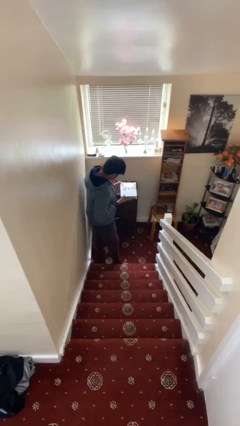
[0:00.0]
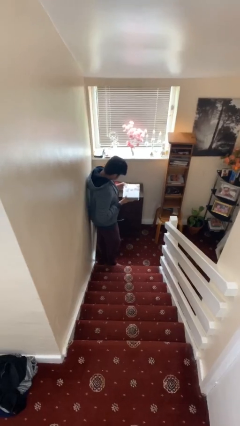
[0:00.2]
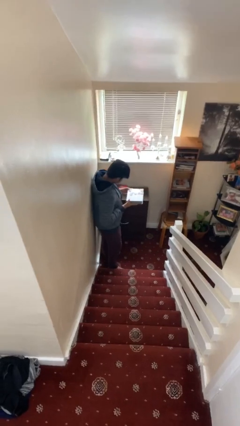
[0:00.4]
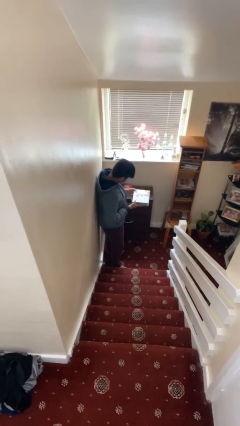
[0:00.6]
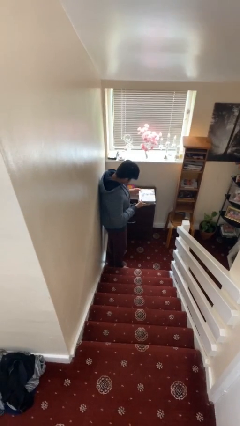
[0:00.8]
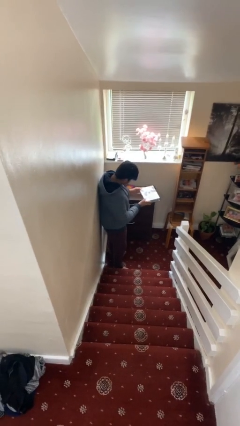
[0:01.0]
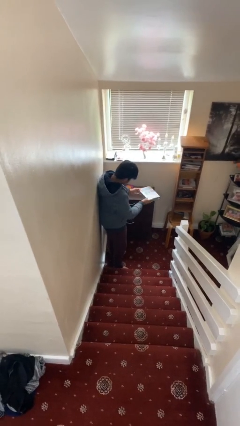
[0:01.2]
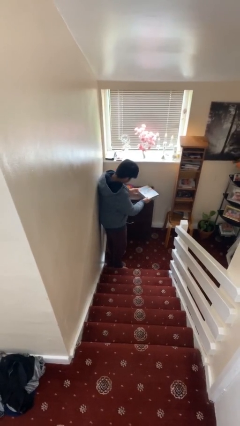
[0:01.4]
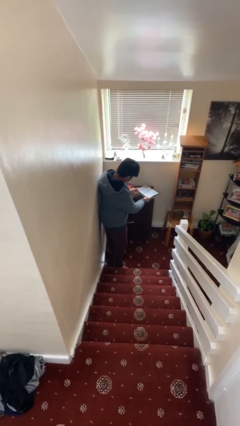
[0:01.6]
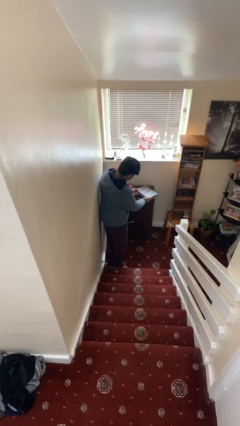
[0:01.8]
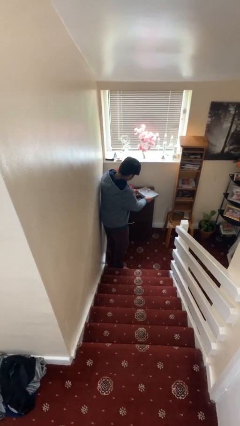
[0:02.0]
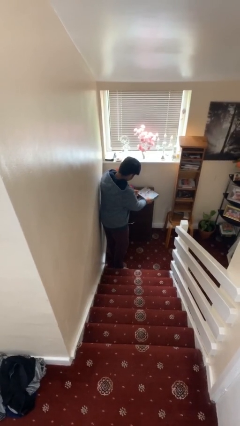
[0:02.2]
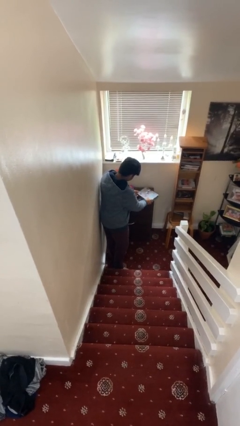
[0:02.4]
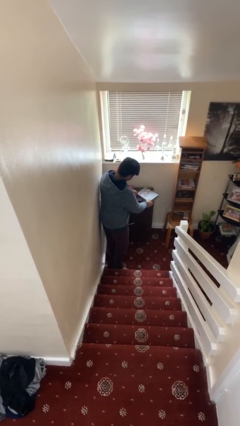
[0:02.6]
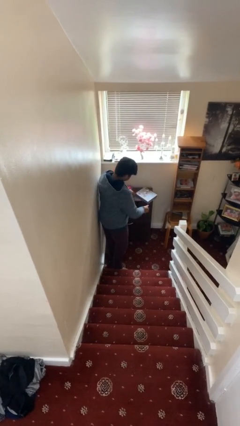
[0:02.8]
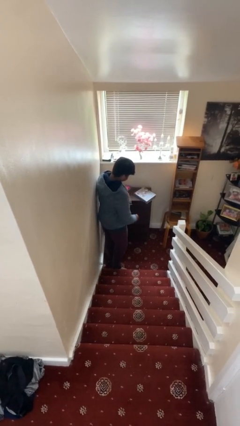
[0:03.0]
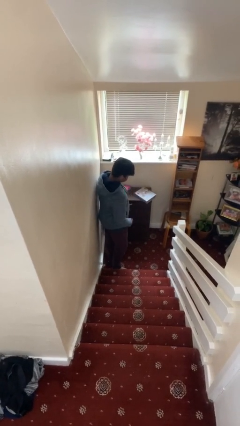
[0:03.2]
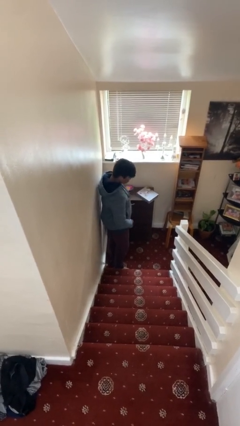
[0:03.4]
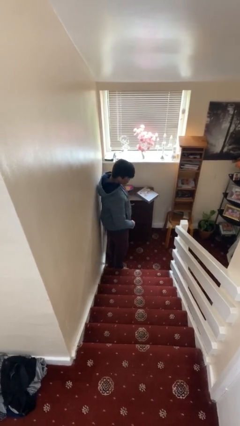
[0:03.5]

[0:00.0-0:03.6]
person puts down object on table

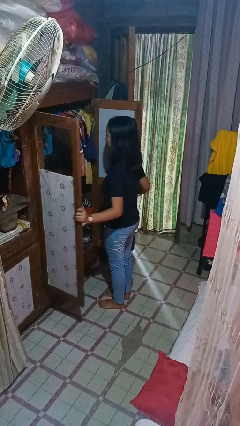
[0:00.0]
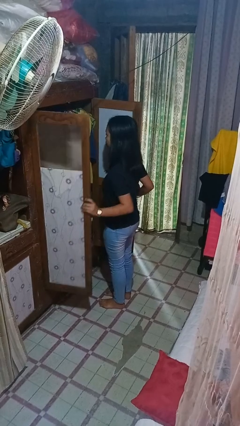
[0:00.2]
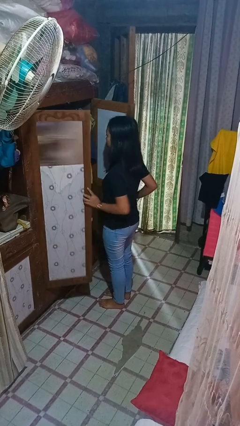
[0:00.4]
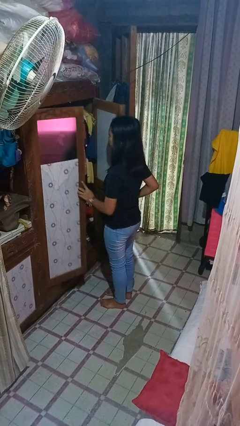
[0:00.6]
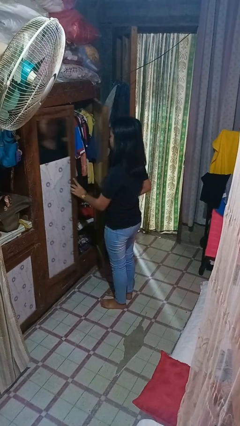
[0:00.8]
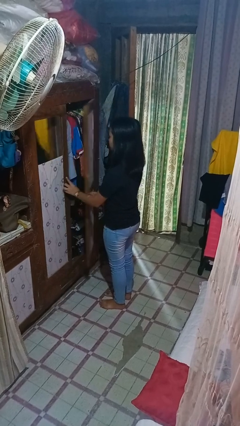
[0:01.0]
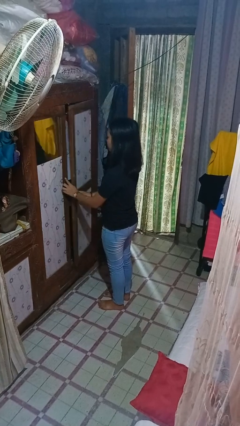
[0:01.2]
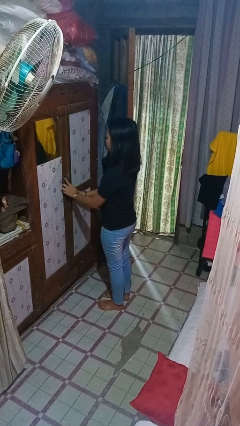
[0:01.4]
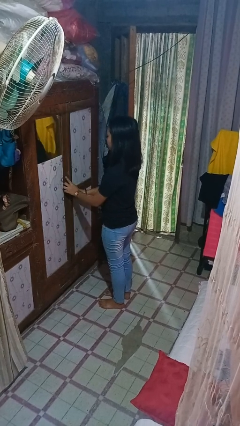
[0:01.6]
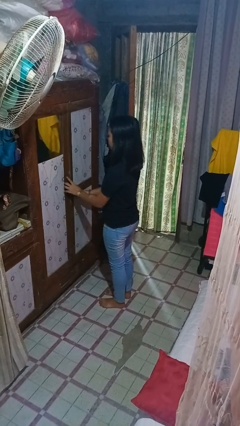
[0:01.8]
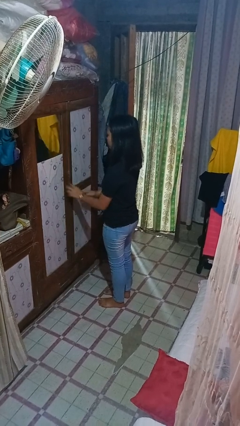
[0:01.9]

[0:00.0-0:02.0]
person closes closet door

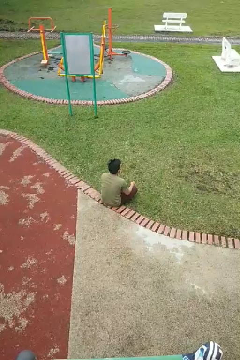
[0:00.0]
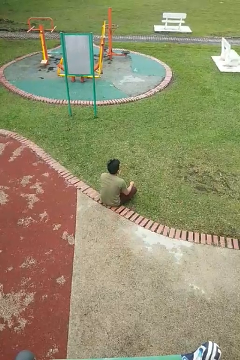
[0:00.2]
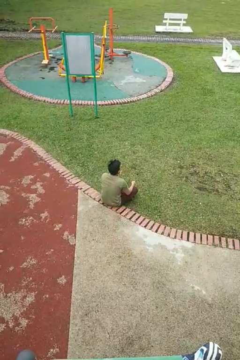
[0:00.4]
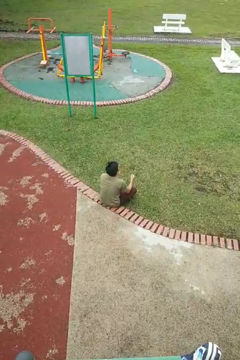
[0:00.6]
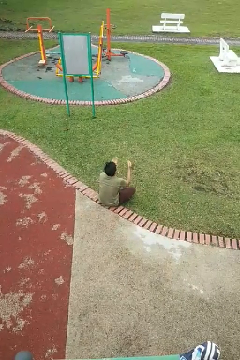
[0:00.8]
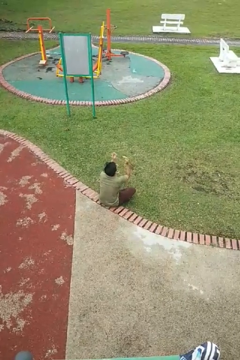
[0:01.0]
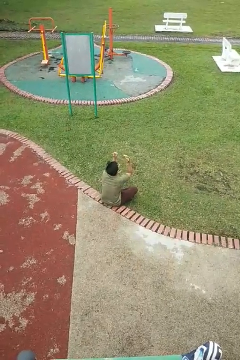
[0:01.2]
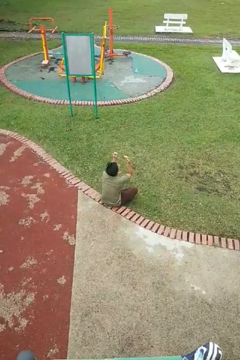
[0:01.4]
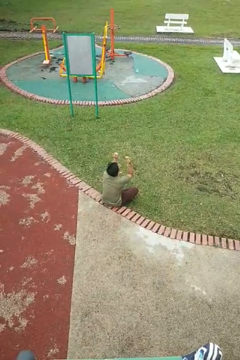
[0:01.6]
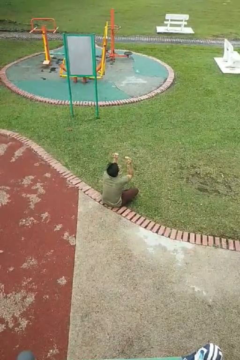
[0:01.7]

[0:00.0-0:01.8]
person prays

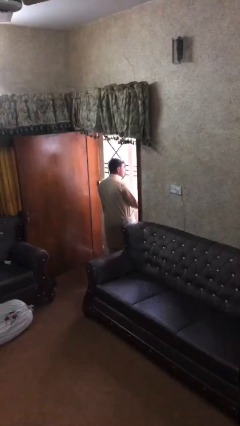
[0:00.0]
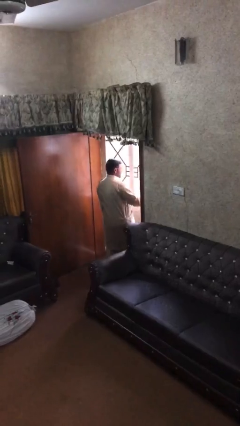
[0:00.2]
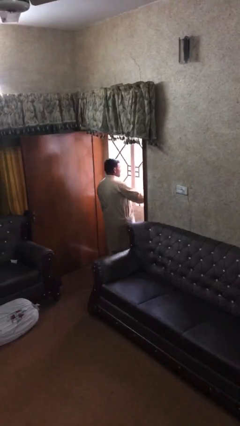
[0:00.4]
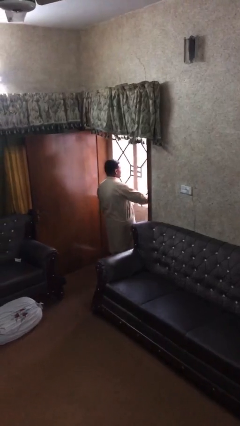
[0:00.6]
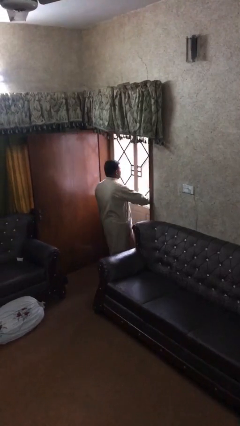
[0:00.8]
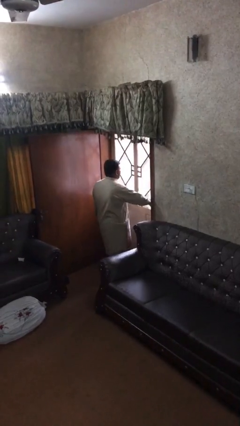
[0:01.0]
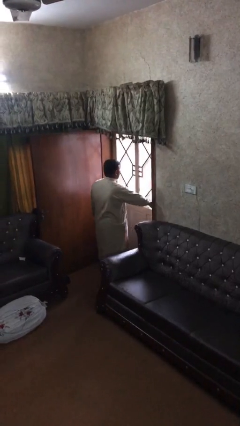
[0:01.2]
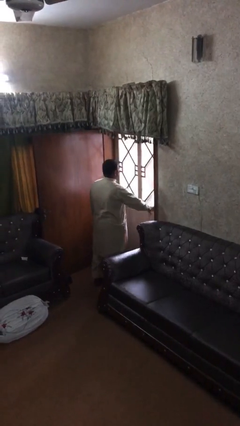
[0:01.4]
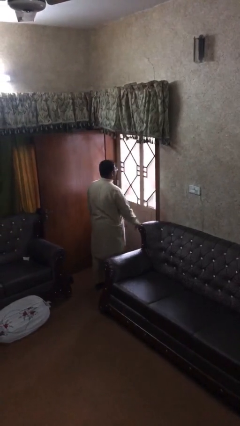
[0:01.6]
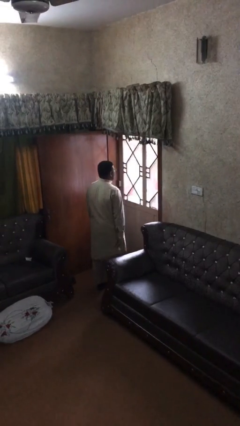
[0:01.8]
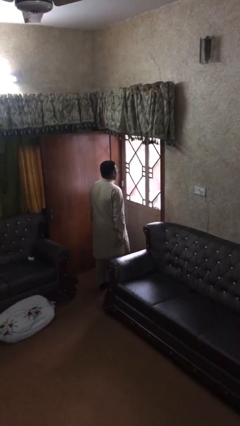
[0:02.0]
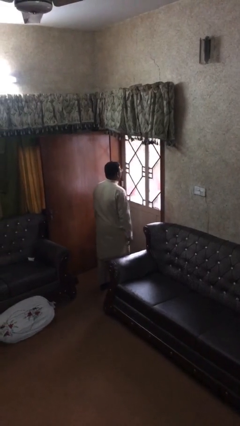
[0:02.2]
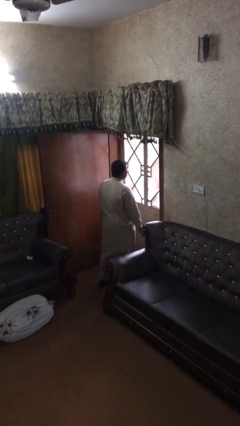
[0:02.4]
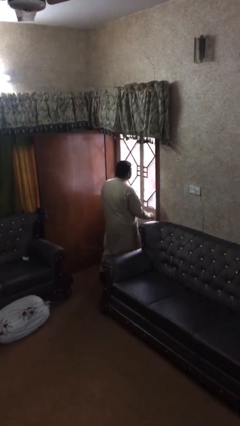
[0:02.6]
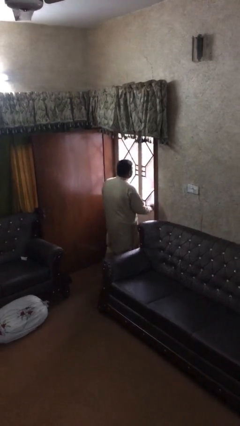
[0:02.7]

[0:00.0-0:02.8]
person closes facility door

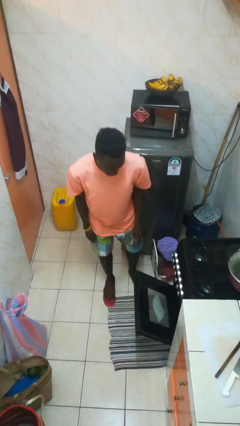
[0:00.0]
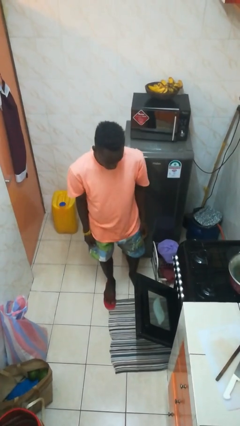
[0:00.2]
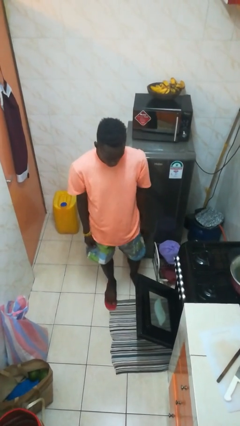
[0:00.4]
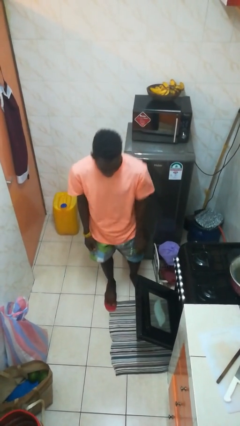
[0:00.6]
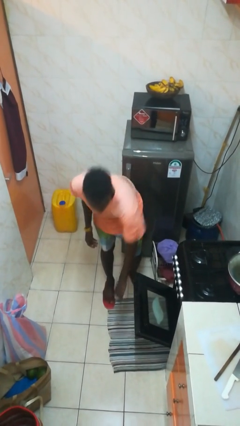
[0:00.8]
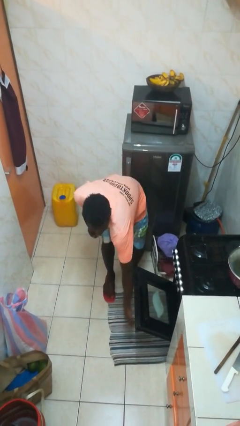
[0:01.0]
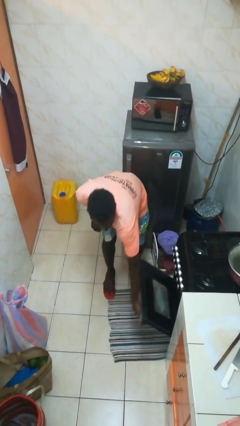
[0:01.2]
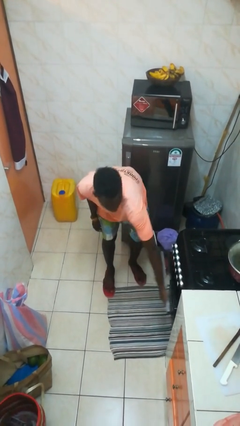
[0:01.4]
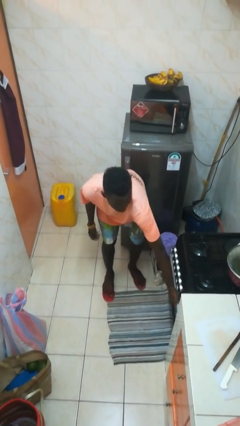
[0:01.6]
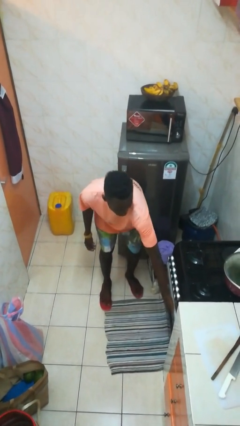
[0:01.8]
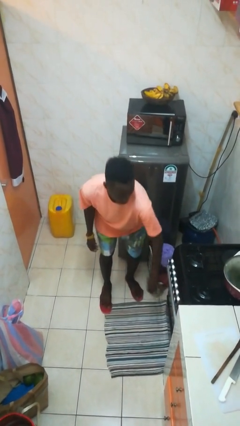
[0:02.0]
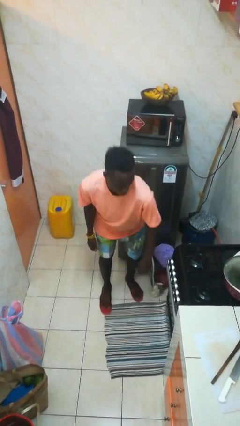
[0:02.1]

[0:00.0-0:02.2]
person closes oven door

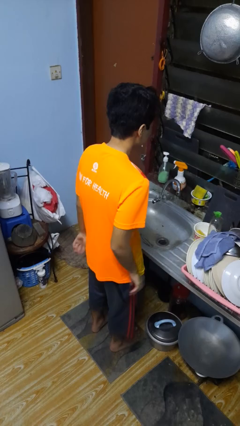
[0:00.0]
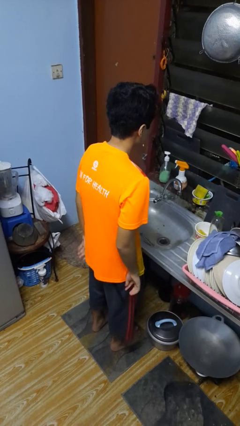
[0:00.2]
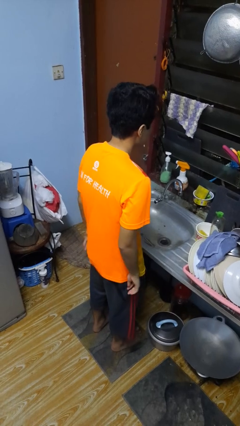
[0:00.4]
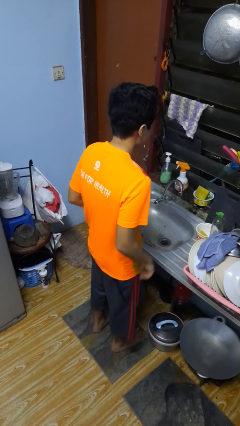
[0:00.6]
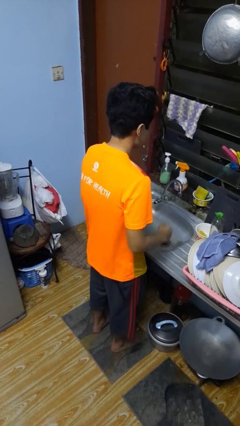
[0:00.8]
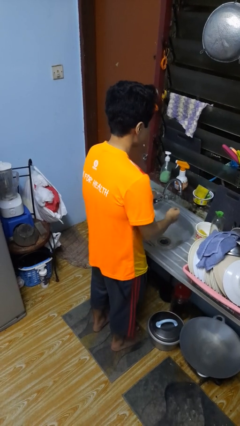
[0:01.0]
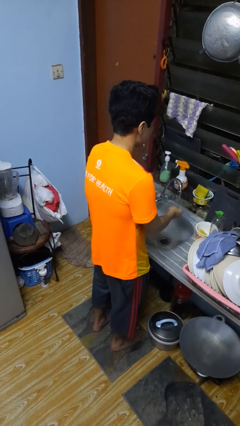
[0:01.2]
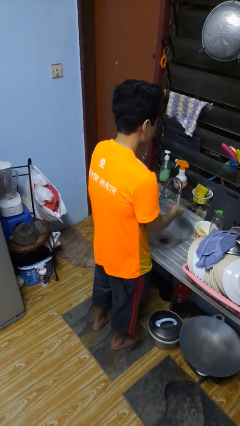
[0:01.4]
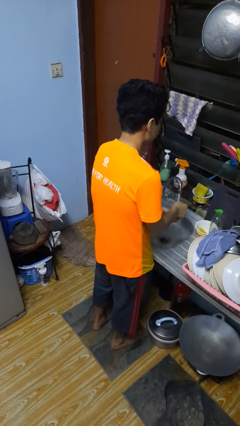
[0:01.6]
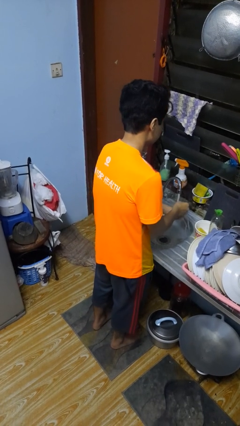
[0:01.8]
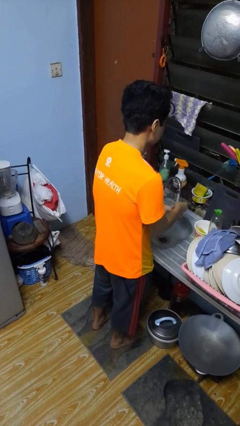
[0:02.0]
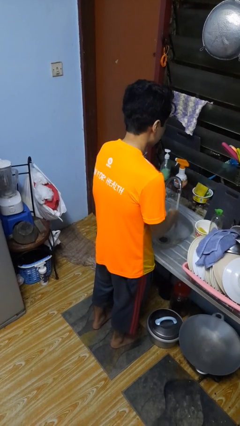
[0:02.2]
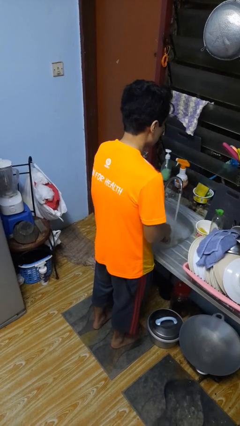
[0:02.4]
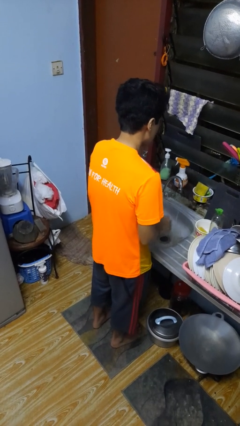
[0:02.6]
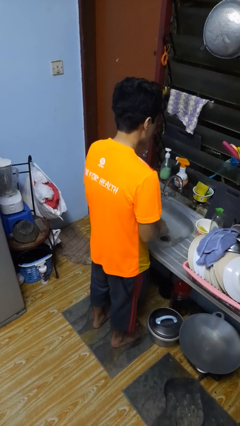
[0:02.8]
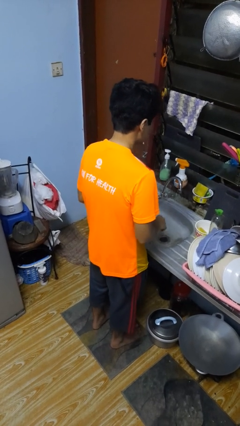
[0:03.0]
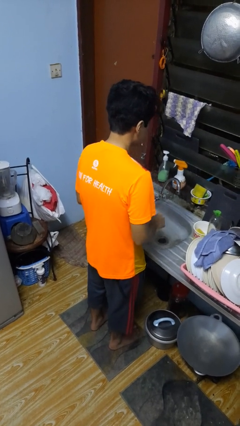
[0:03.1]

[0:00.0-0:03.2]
person washes hands

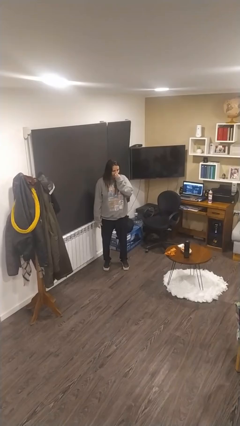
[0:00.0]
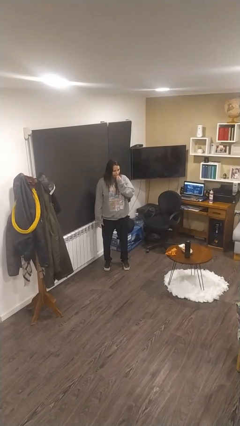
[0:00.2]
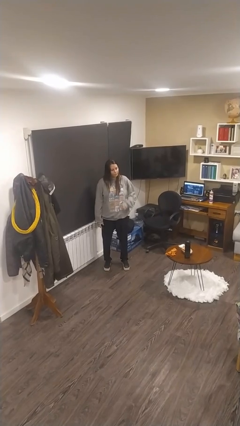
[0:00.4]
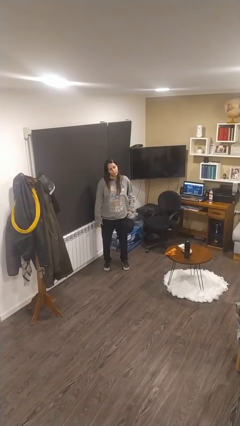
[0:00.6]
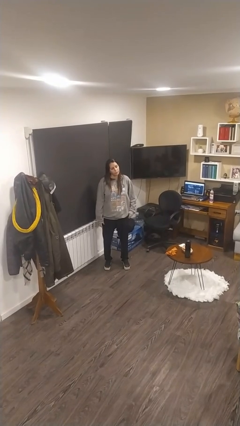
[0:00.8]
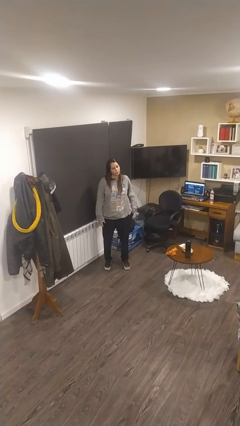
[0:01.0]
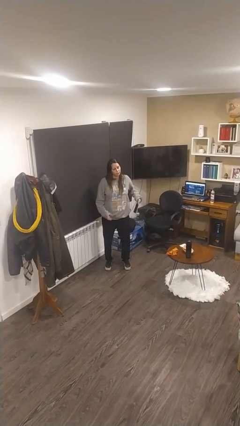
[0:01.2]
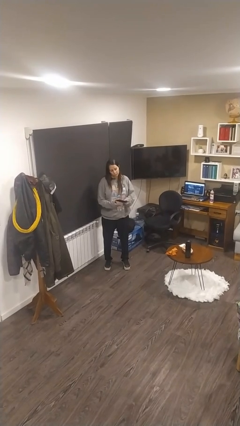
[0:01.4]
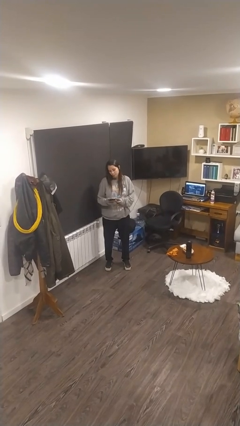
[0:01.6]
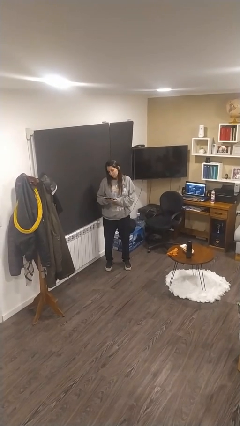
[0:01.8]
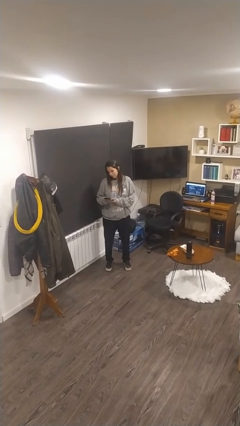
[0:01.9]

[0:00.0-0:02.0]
person takes phone from pocket

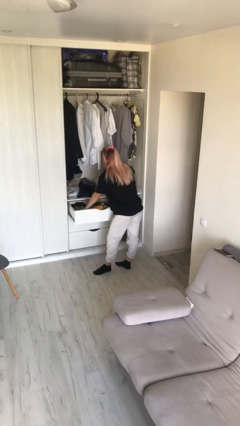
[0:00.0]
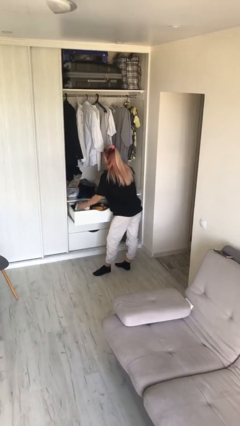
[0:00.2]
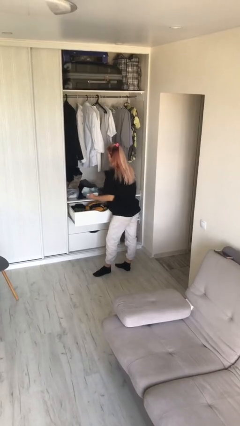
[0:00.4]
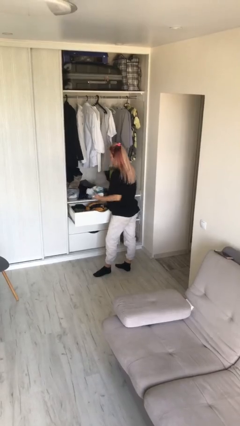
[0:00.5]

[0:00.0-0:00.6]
person takes clothes from dresser
